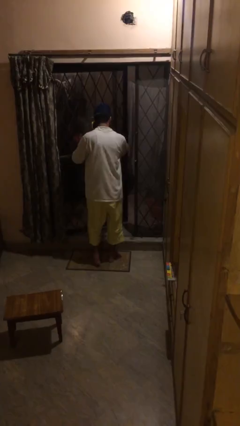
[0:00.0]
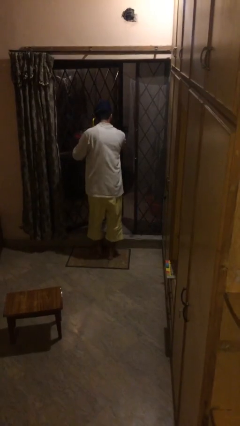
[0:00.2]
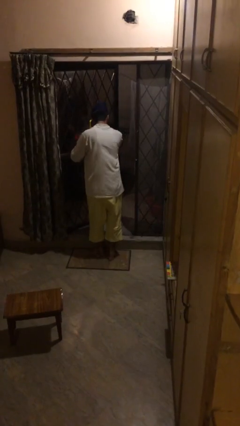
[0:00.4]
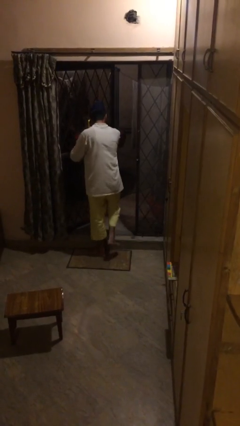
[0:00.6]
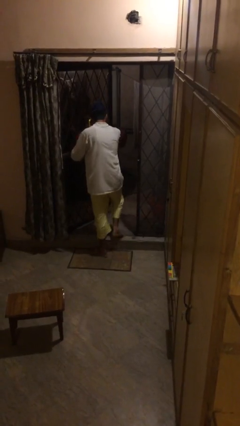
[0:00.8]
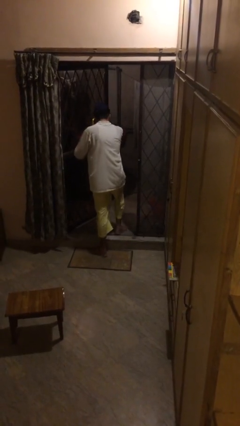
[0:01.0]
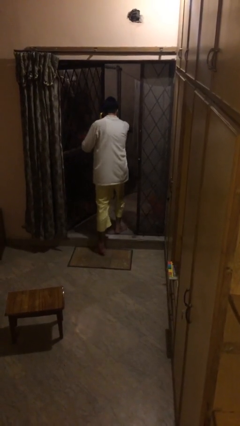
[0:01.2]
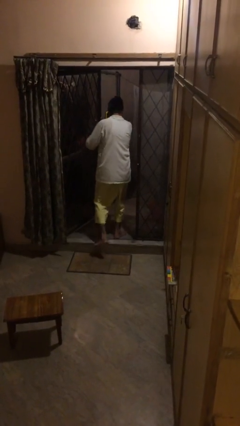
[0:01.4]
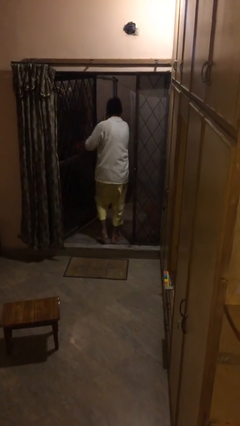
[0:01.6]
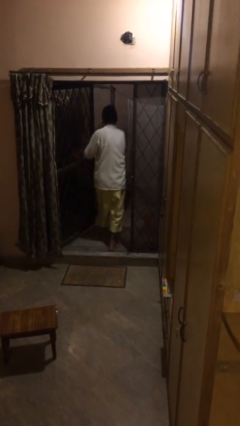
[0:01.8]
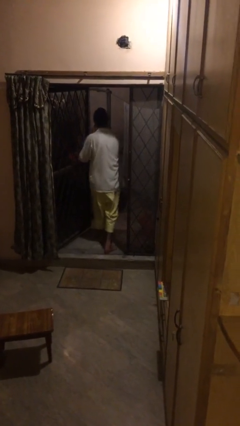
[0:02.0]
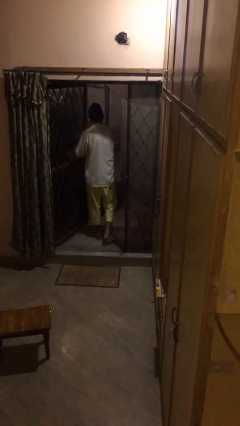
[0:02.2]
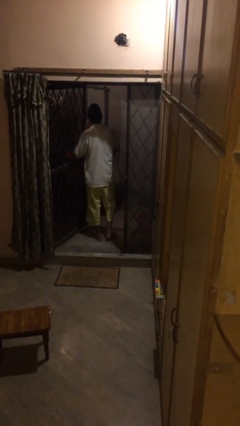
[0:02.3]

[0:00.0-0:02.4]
person exits scene through structure

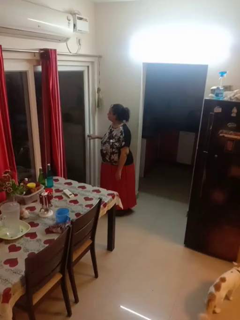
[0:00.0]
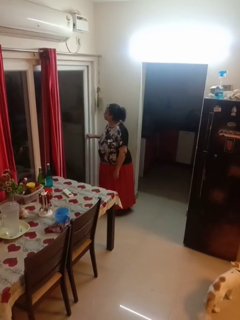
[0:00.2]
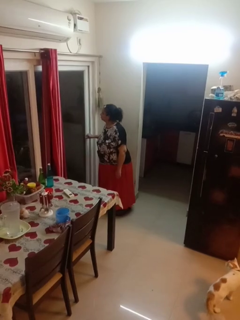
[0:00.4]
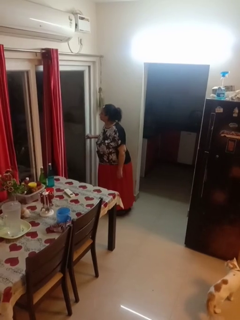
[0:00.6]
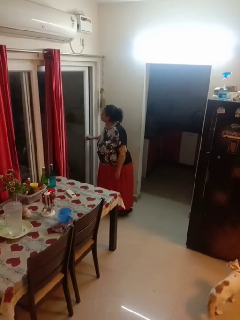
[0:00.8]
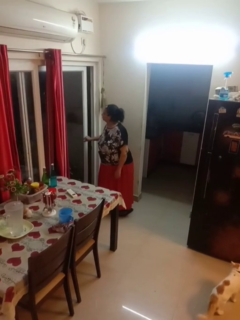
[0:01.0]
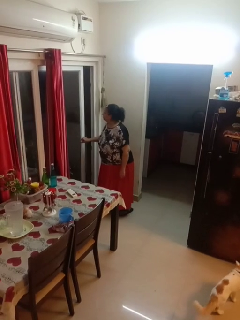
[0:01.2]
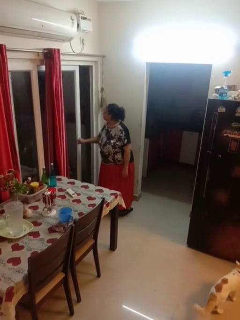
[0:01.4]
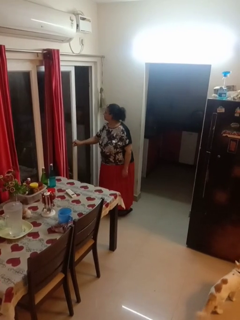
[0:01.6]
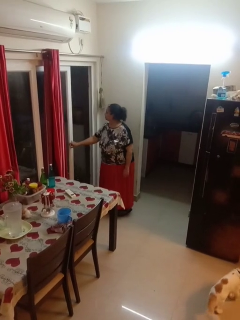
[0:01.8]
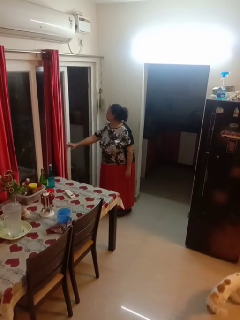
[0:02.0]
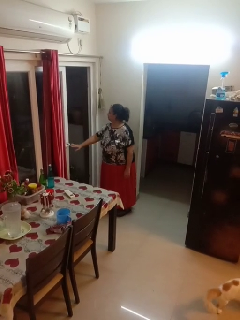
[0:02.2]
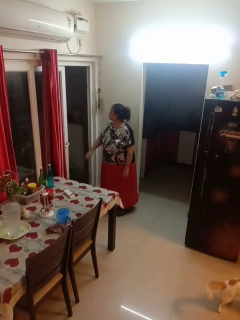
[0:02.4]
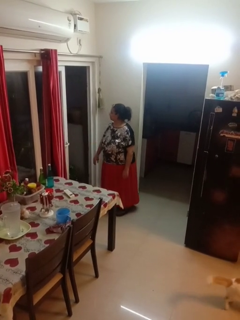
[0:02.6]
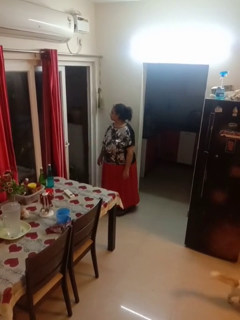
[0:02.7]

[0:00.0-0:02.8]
person opens sliding door

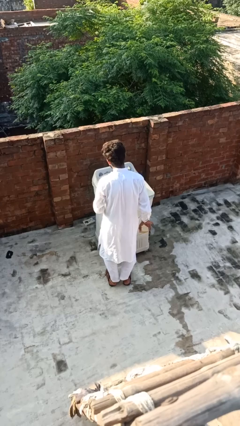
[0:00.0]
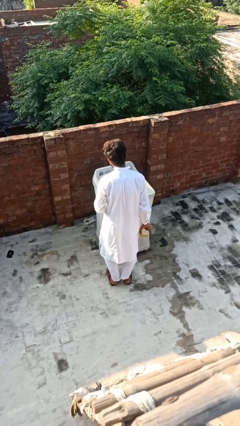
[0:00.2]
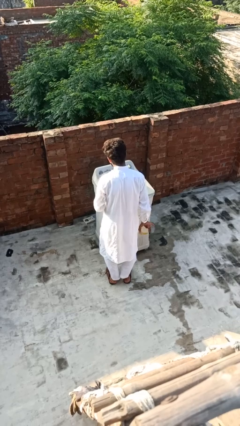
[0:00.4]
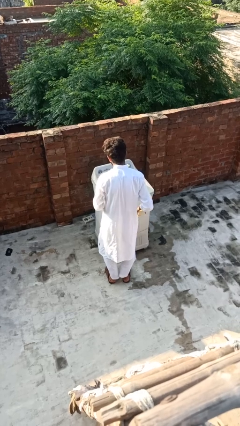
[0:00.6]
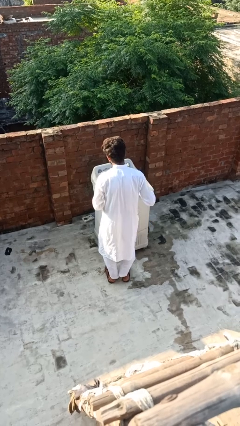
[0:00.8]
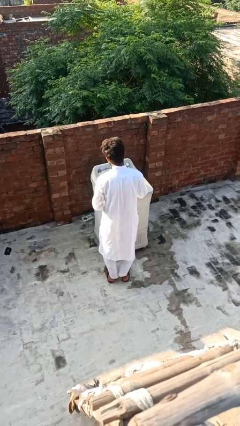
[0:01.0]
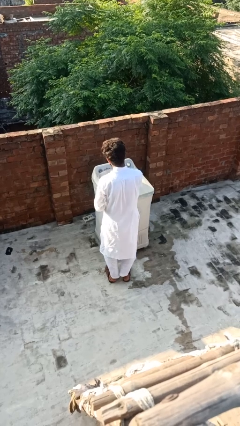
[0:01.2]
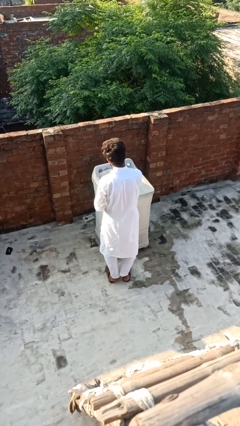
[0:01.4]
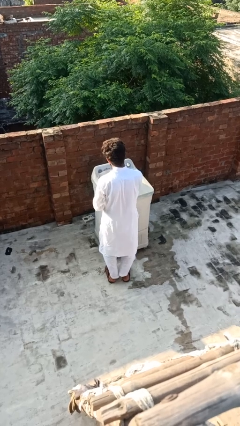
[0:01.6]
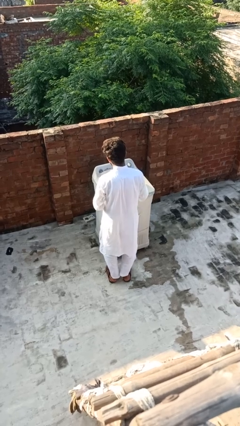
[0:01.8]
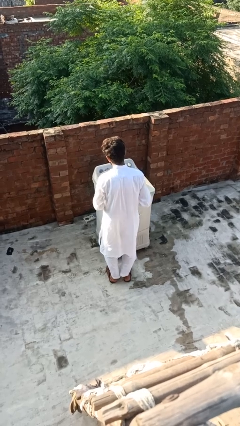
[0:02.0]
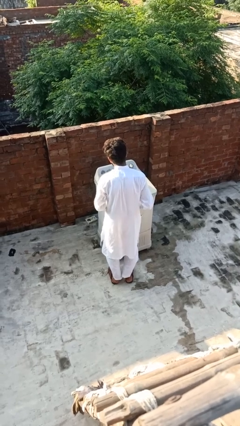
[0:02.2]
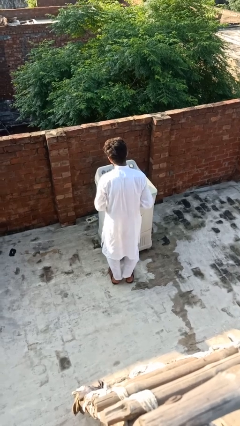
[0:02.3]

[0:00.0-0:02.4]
person pours into bowl

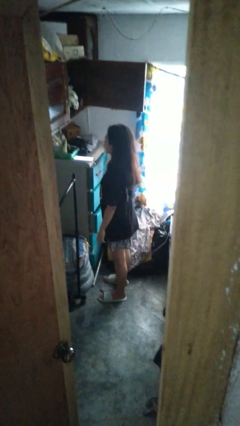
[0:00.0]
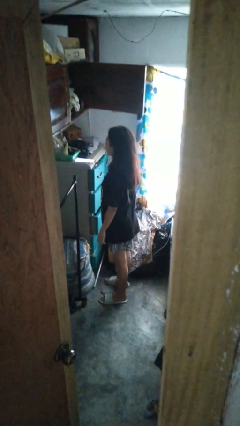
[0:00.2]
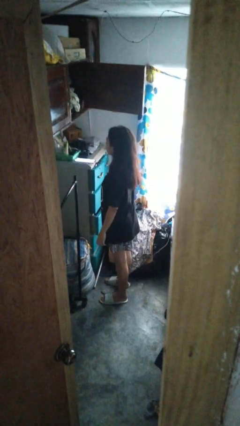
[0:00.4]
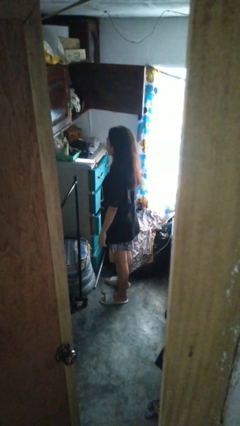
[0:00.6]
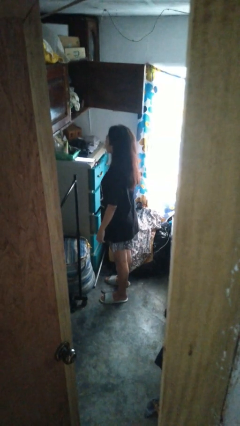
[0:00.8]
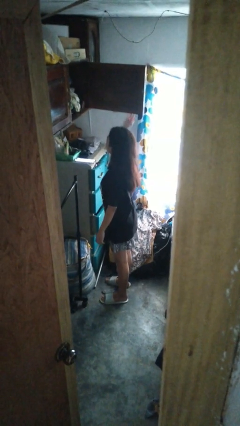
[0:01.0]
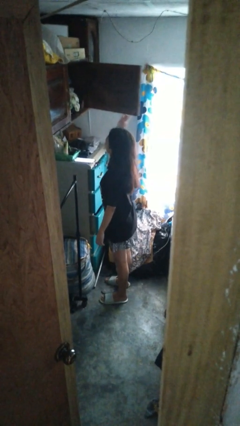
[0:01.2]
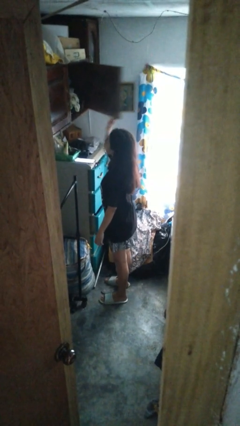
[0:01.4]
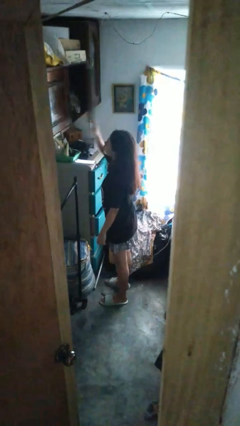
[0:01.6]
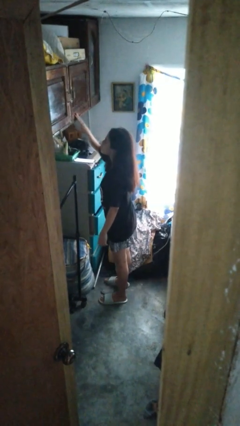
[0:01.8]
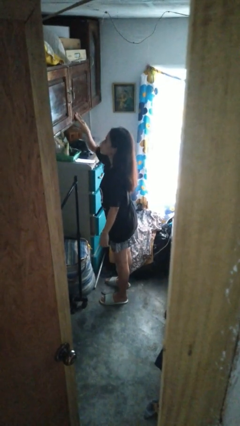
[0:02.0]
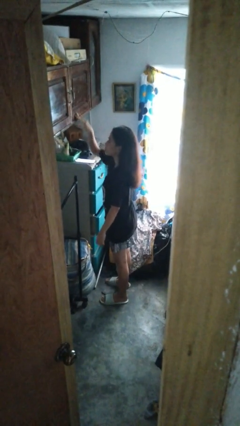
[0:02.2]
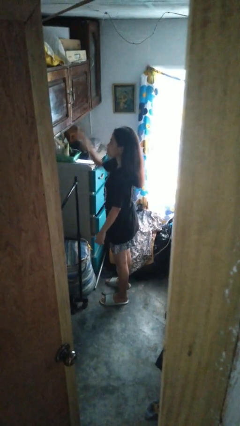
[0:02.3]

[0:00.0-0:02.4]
person closes closet door

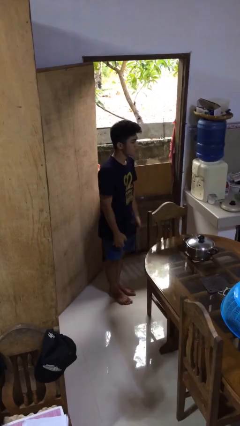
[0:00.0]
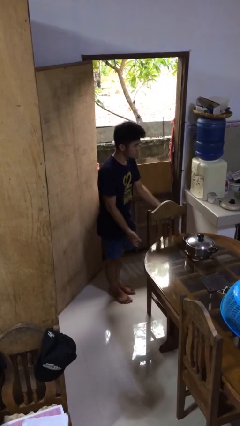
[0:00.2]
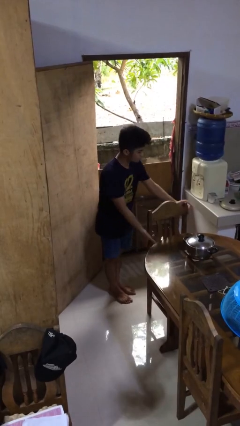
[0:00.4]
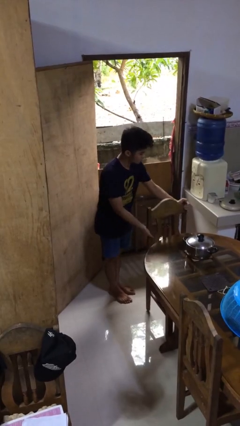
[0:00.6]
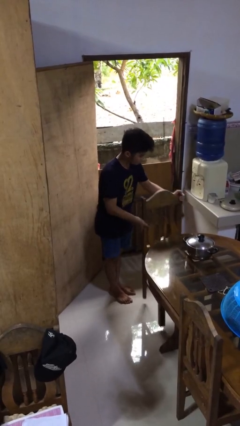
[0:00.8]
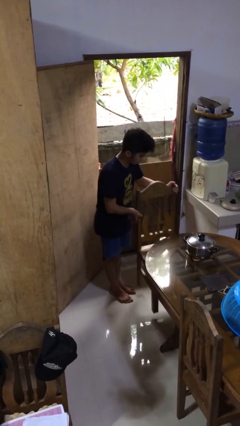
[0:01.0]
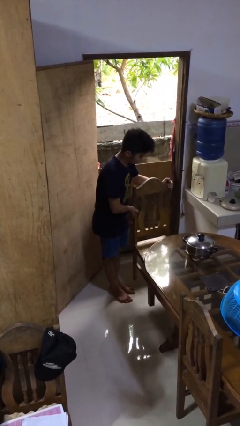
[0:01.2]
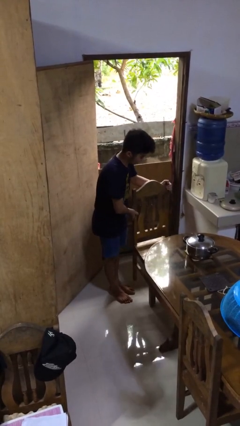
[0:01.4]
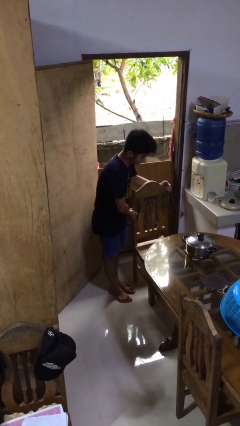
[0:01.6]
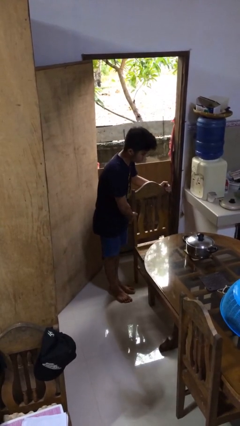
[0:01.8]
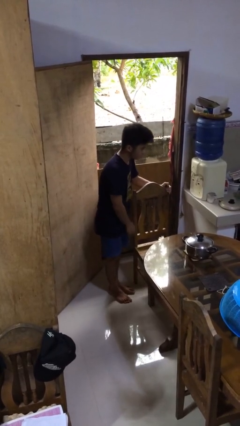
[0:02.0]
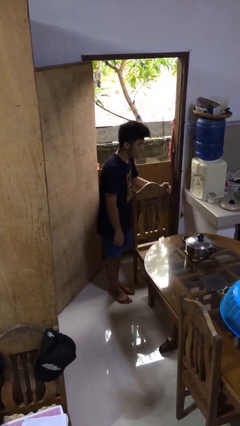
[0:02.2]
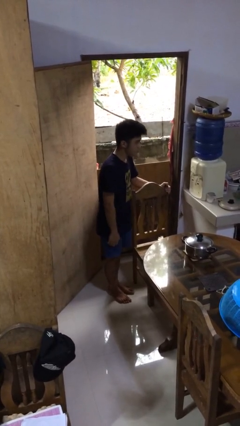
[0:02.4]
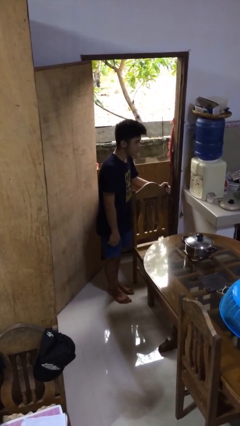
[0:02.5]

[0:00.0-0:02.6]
person pulls out chair

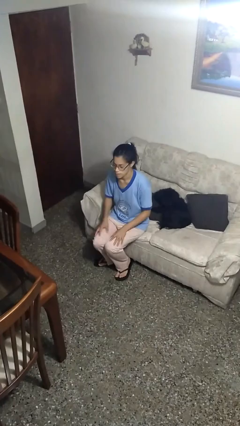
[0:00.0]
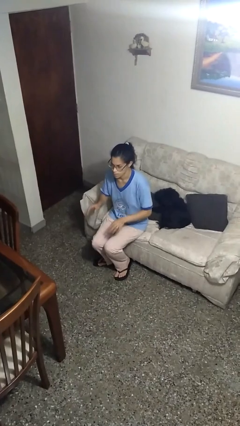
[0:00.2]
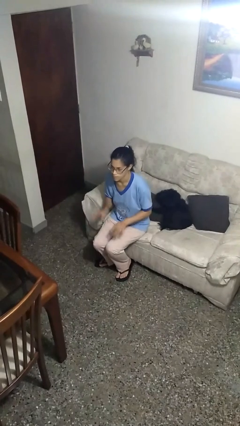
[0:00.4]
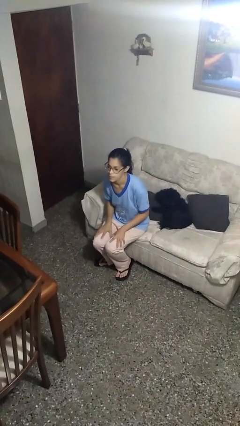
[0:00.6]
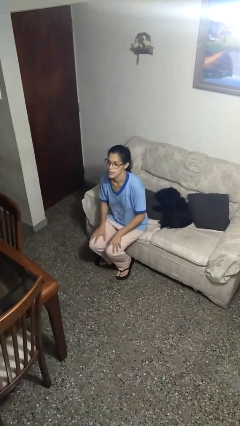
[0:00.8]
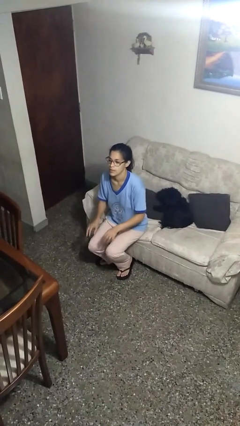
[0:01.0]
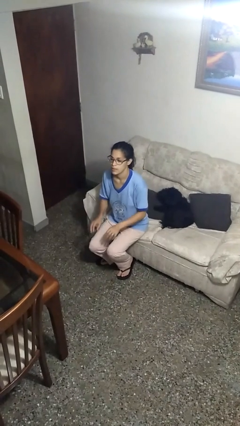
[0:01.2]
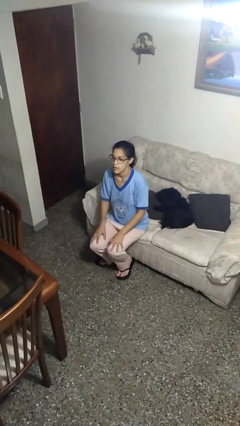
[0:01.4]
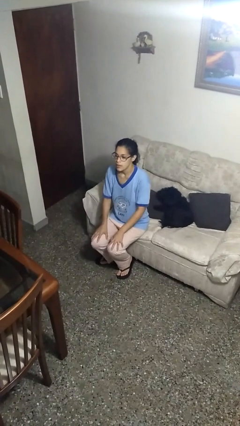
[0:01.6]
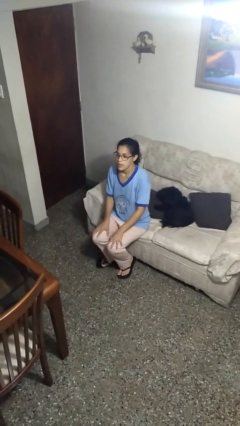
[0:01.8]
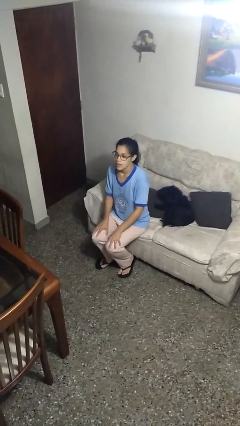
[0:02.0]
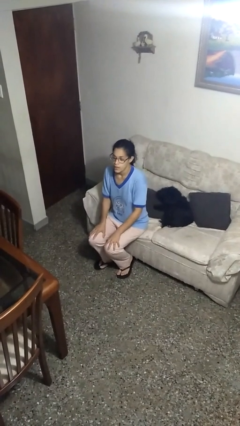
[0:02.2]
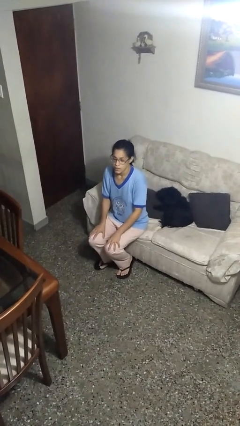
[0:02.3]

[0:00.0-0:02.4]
person slaps hands on thighs

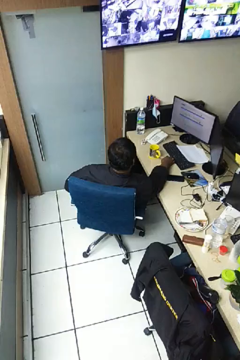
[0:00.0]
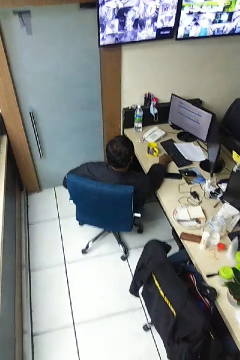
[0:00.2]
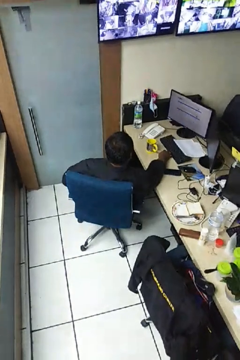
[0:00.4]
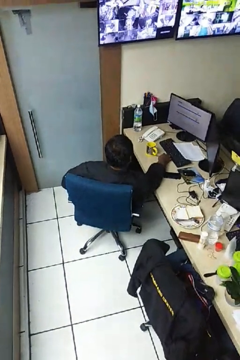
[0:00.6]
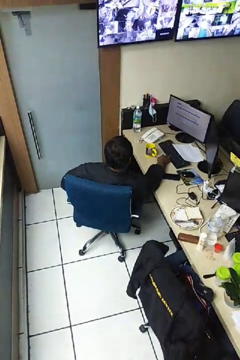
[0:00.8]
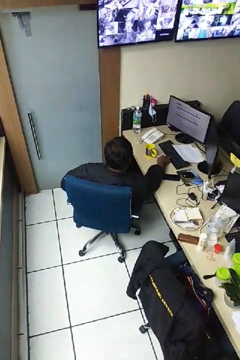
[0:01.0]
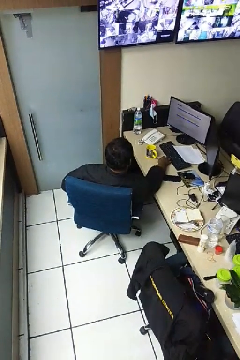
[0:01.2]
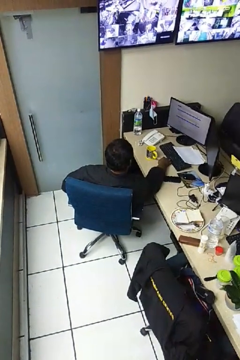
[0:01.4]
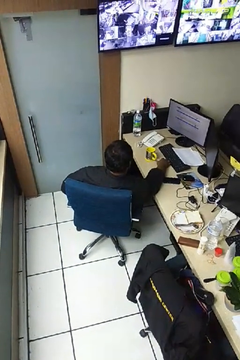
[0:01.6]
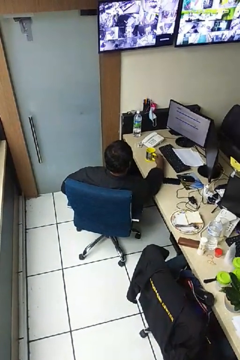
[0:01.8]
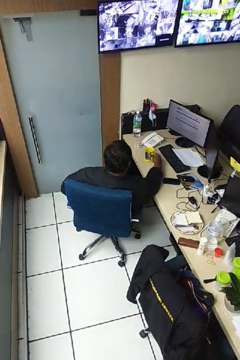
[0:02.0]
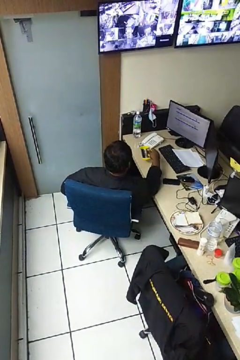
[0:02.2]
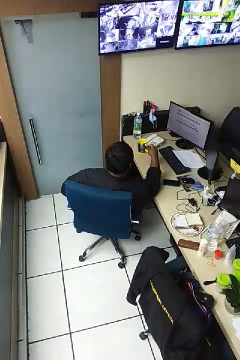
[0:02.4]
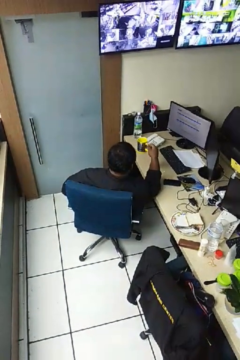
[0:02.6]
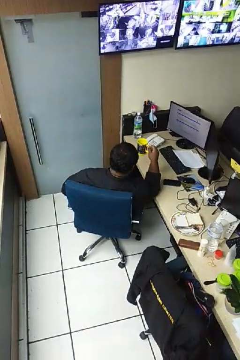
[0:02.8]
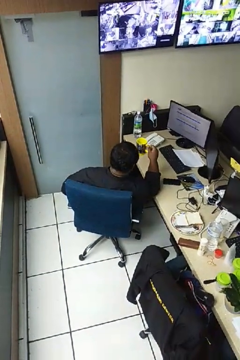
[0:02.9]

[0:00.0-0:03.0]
person picks up object from table

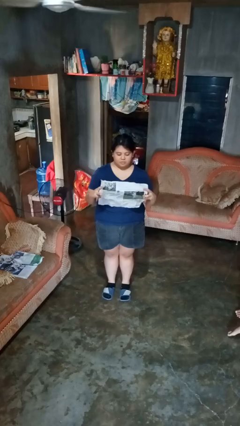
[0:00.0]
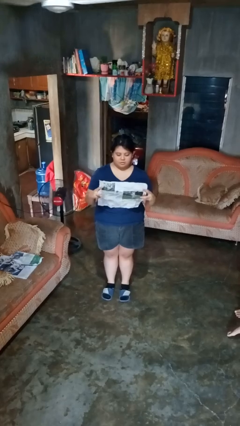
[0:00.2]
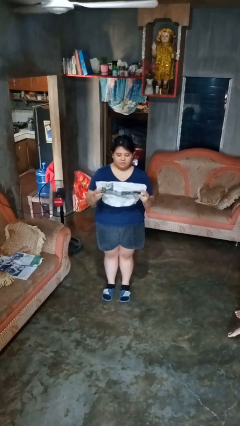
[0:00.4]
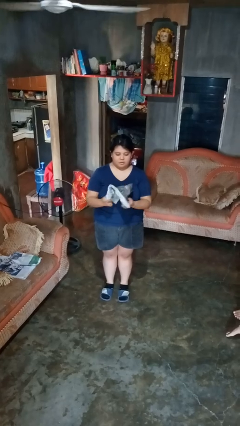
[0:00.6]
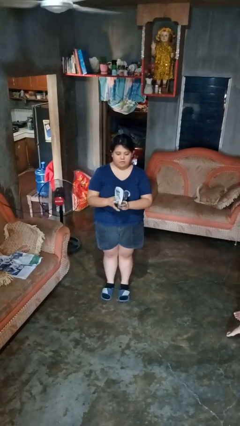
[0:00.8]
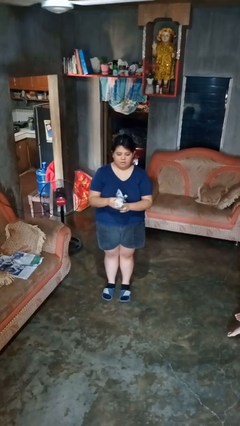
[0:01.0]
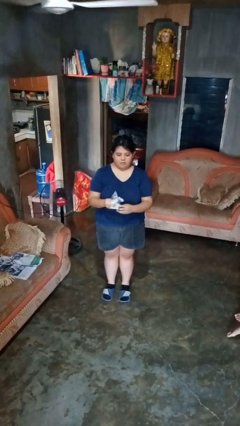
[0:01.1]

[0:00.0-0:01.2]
person crumples paper
